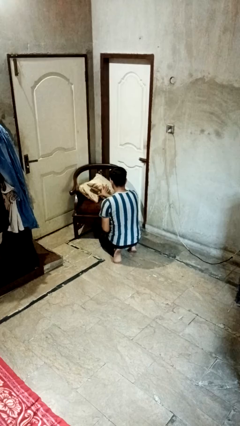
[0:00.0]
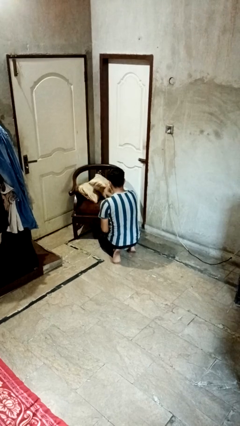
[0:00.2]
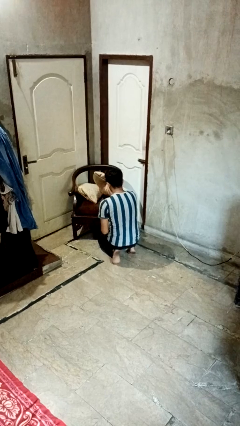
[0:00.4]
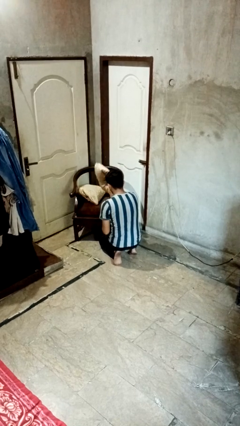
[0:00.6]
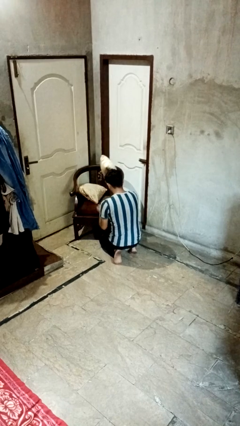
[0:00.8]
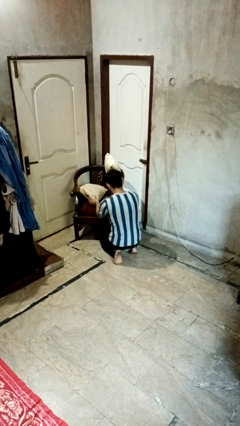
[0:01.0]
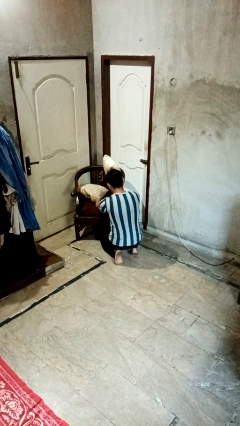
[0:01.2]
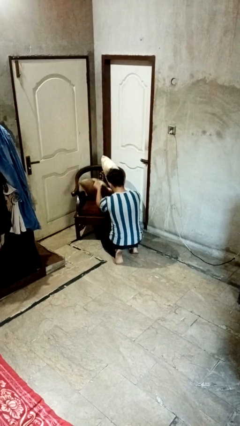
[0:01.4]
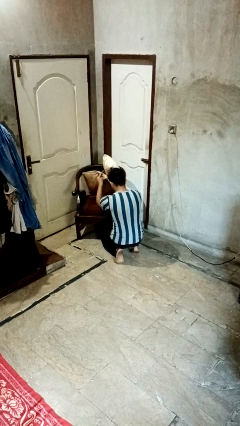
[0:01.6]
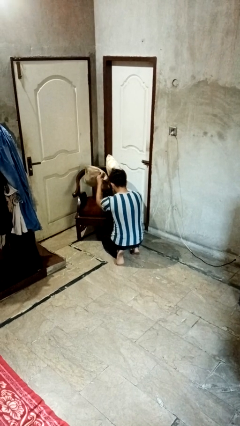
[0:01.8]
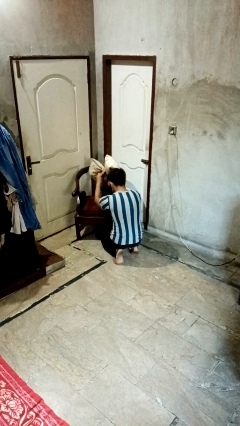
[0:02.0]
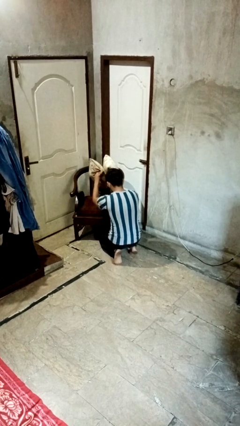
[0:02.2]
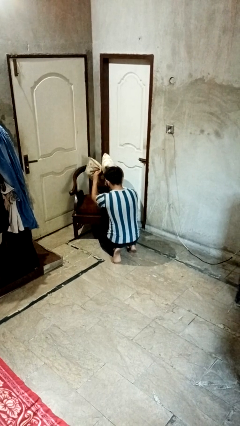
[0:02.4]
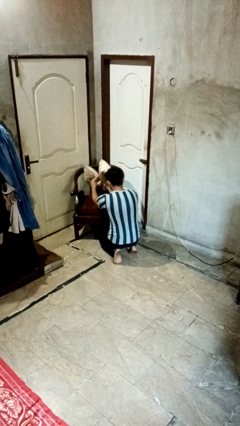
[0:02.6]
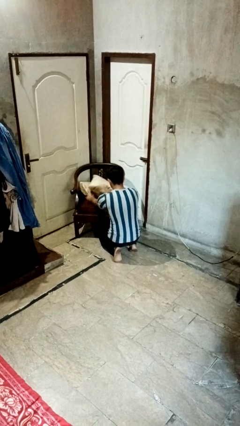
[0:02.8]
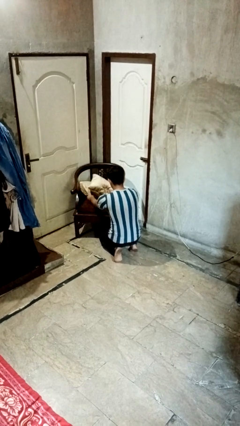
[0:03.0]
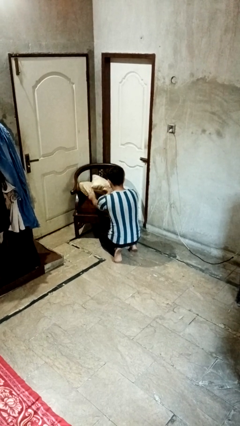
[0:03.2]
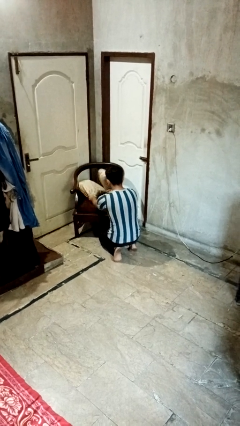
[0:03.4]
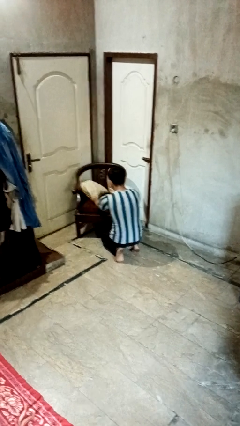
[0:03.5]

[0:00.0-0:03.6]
person searches in couch

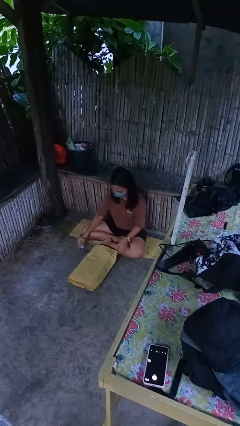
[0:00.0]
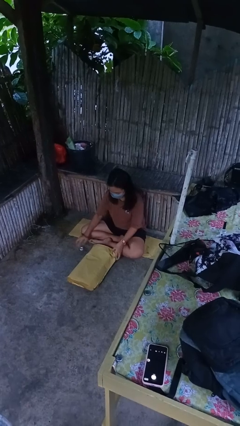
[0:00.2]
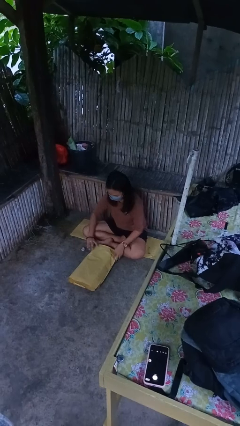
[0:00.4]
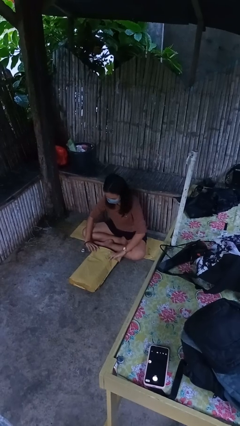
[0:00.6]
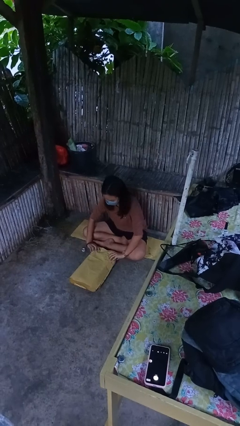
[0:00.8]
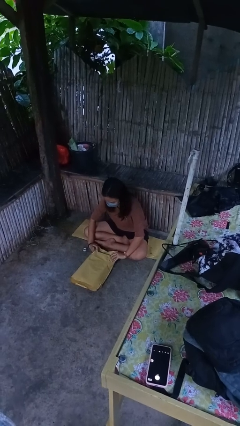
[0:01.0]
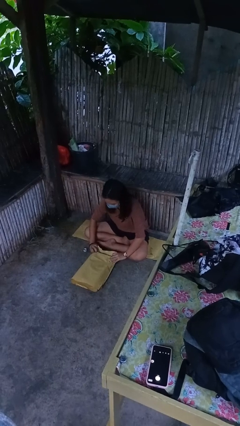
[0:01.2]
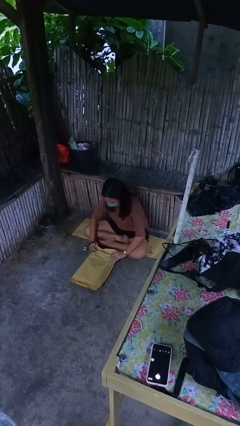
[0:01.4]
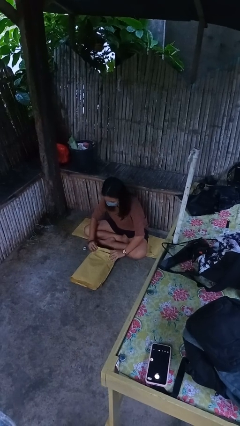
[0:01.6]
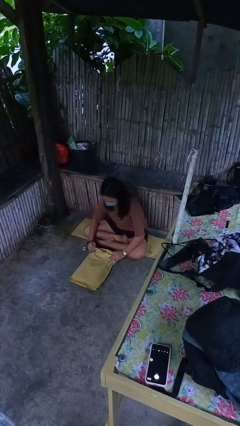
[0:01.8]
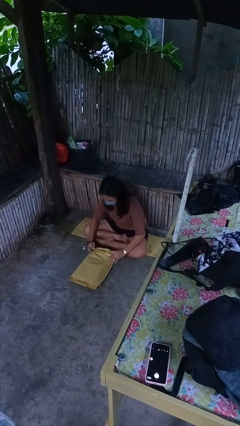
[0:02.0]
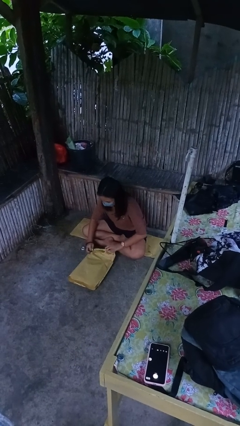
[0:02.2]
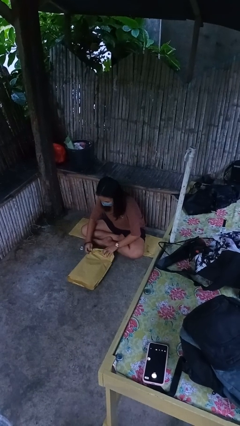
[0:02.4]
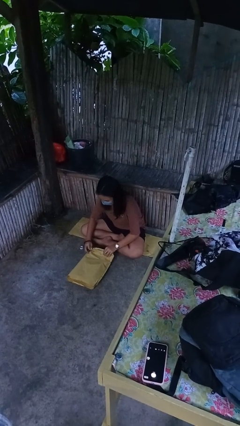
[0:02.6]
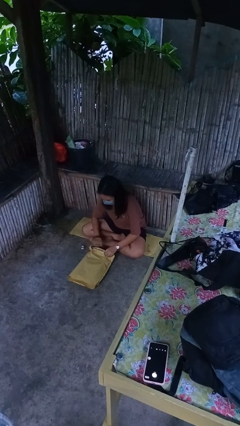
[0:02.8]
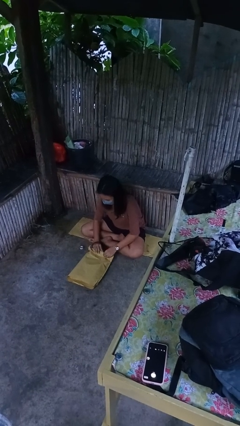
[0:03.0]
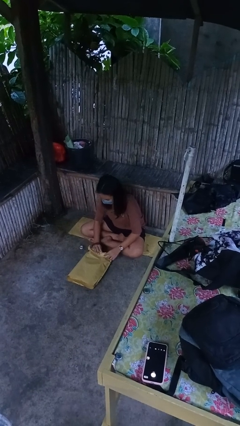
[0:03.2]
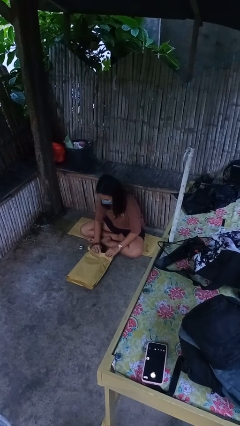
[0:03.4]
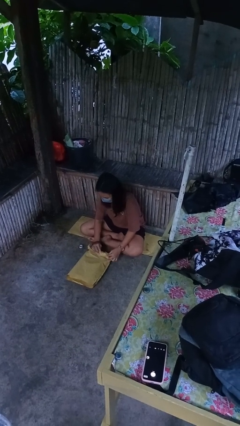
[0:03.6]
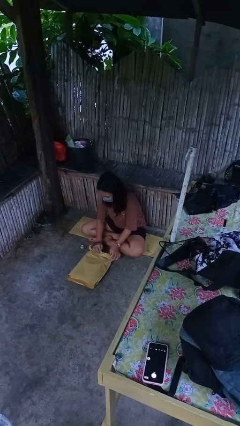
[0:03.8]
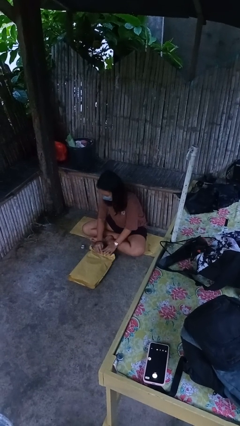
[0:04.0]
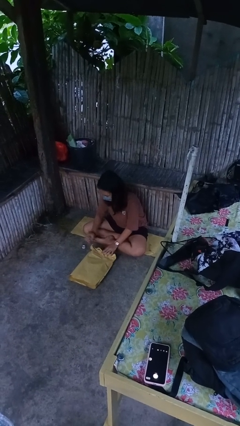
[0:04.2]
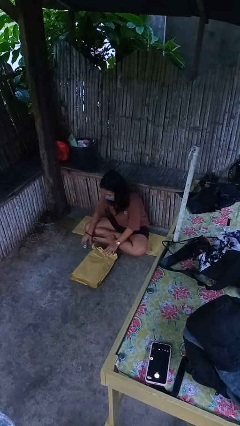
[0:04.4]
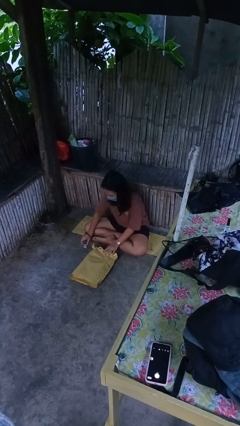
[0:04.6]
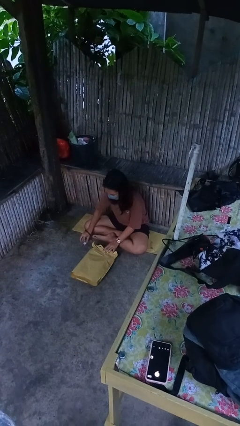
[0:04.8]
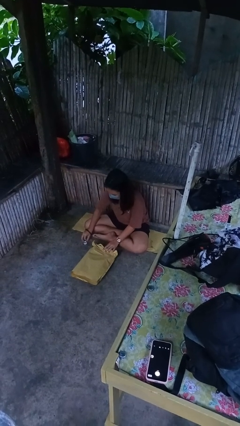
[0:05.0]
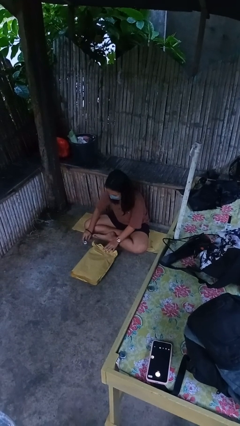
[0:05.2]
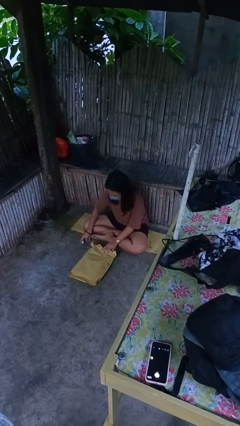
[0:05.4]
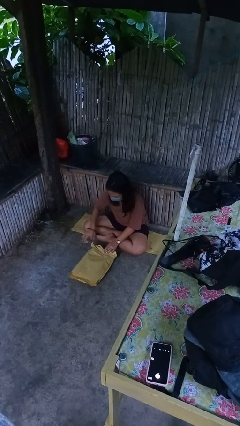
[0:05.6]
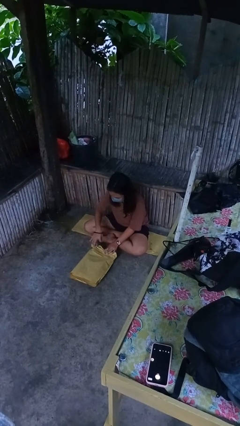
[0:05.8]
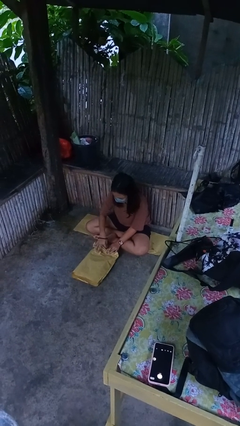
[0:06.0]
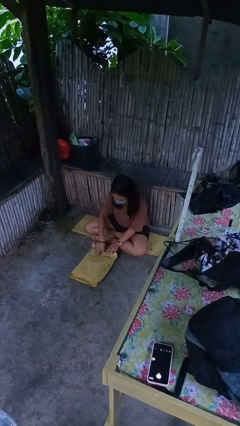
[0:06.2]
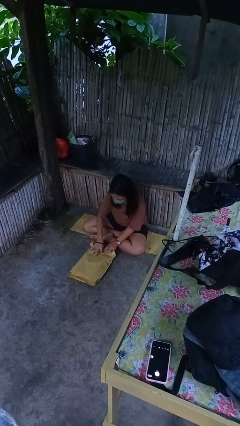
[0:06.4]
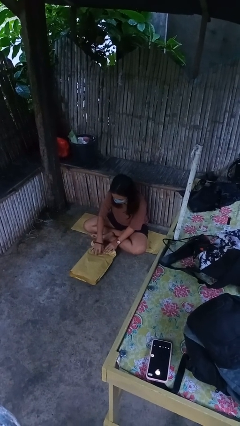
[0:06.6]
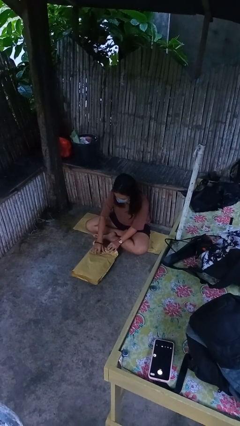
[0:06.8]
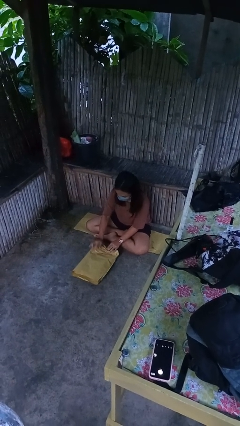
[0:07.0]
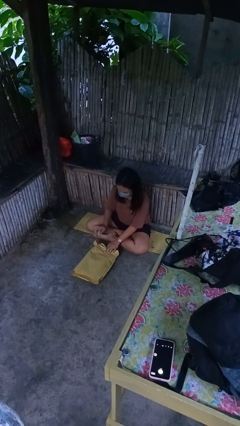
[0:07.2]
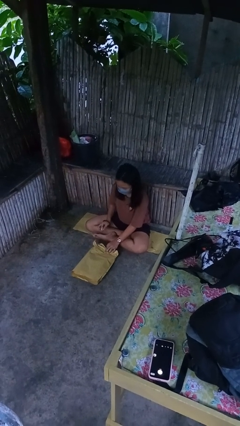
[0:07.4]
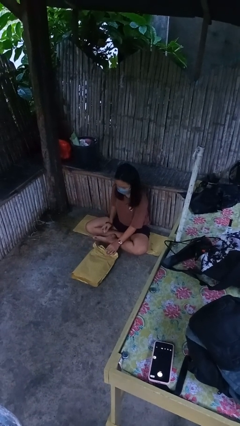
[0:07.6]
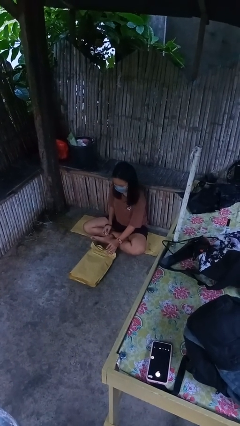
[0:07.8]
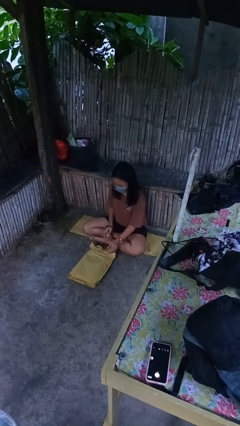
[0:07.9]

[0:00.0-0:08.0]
person wraps box

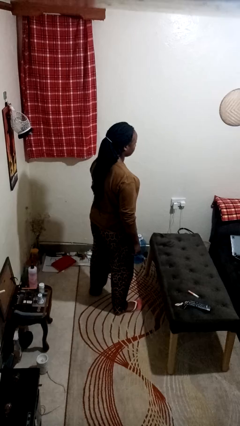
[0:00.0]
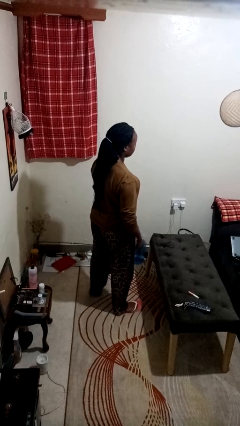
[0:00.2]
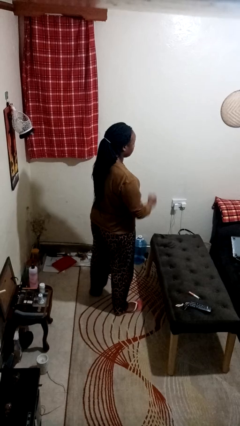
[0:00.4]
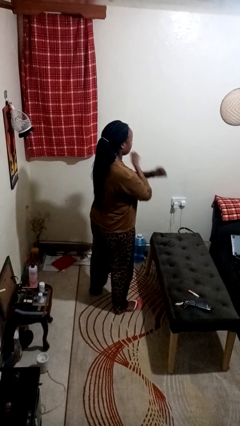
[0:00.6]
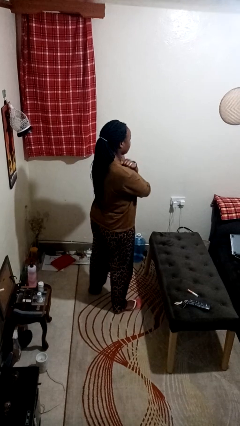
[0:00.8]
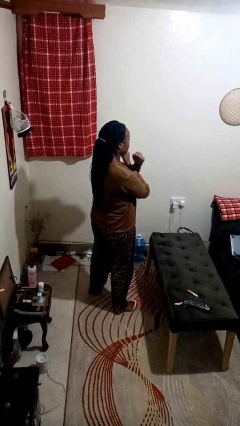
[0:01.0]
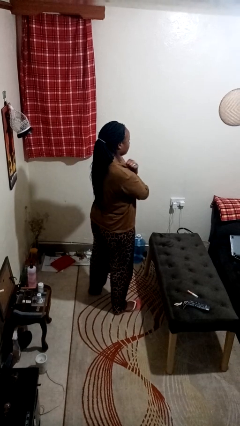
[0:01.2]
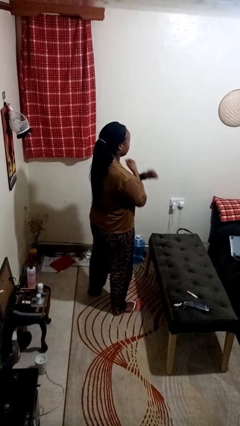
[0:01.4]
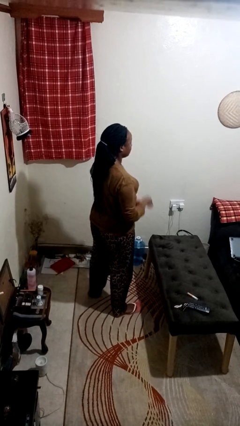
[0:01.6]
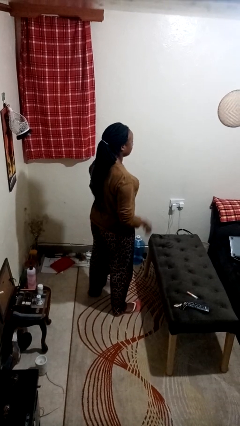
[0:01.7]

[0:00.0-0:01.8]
person gestures arms x

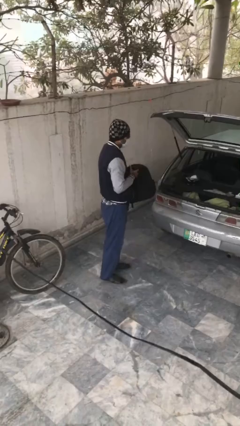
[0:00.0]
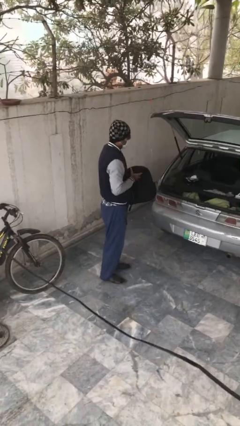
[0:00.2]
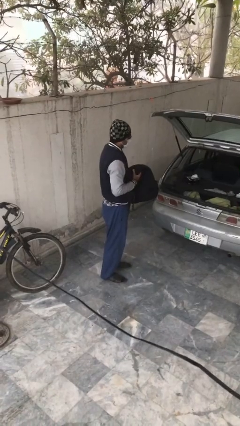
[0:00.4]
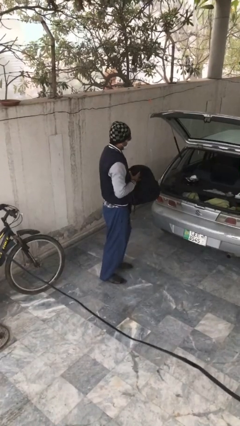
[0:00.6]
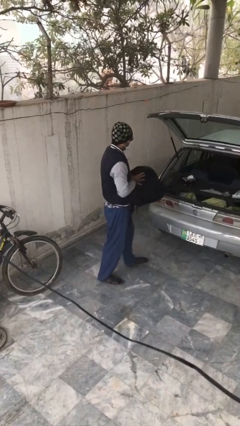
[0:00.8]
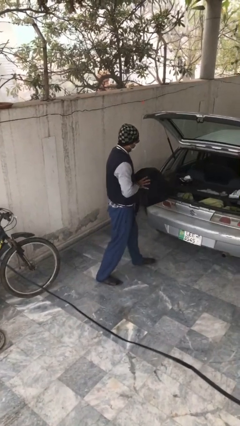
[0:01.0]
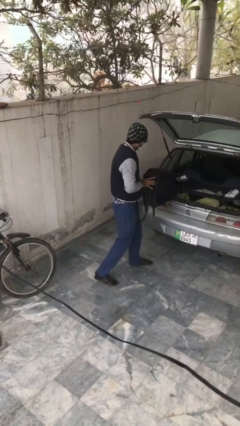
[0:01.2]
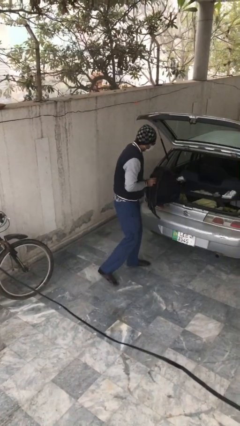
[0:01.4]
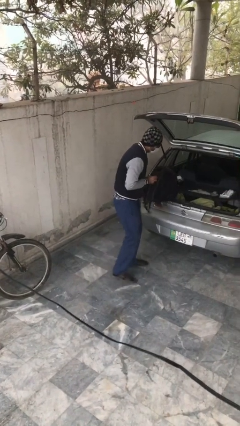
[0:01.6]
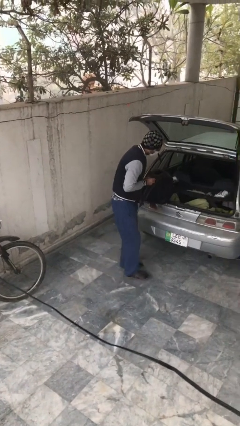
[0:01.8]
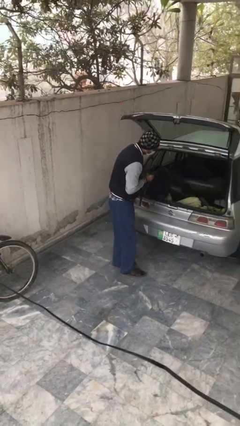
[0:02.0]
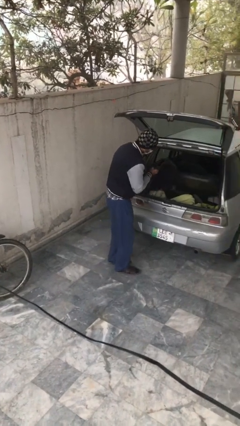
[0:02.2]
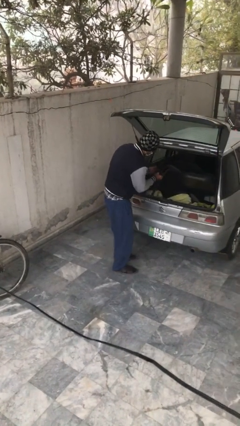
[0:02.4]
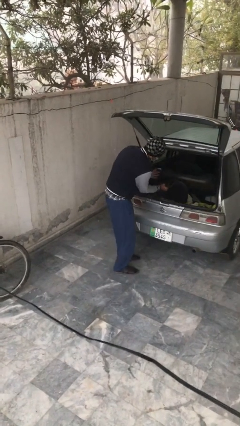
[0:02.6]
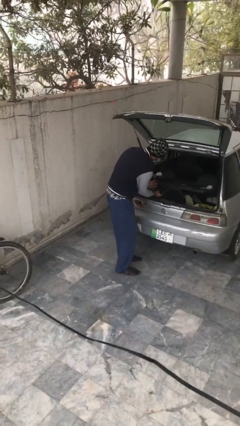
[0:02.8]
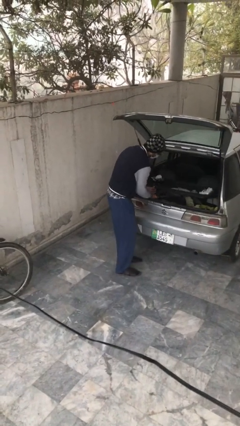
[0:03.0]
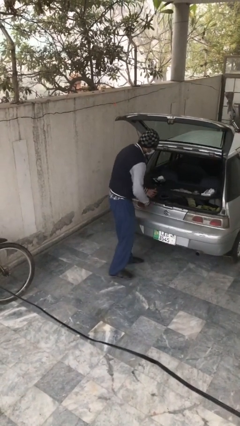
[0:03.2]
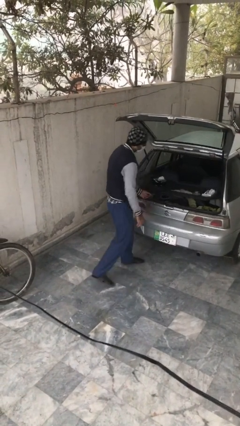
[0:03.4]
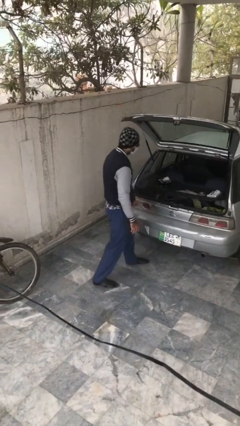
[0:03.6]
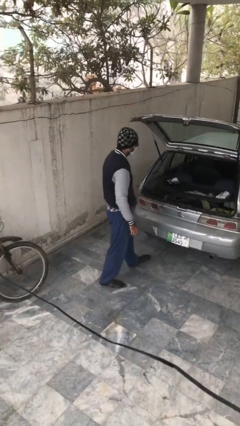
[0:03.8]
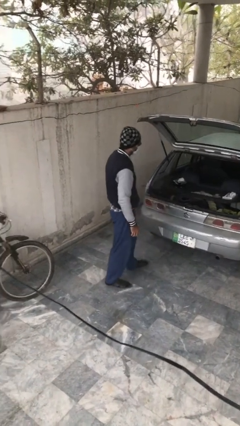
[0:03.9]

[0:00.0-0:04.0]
person loads car

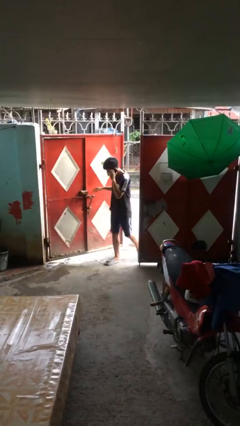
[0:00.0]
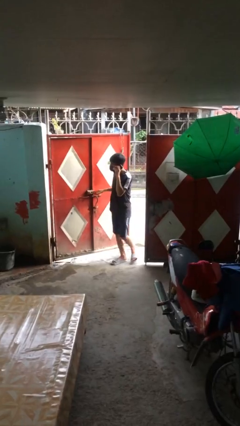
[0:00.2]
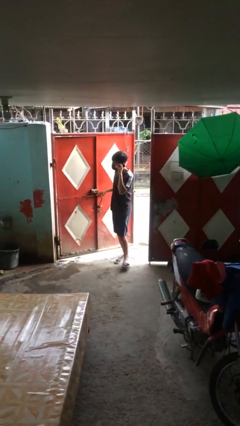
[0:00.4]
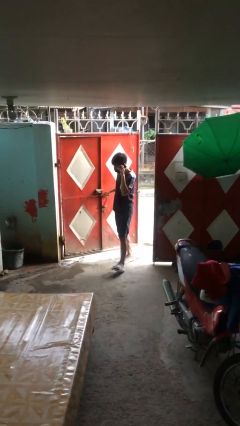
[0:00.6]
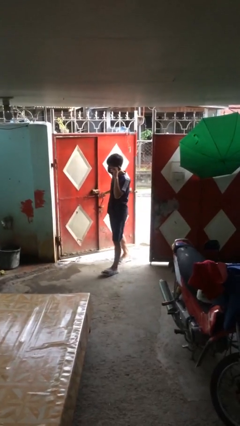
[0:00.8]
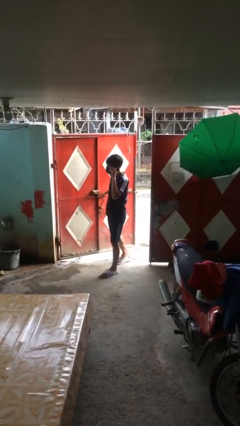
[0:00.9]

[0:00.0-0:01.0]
person enters scene through structure
